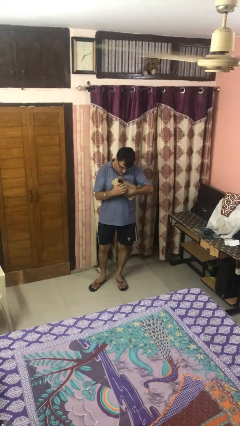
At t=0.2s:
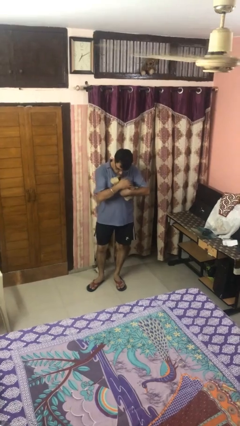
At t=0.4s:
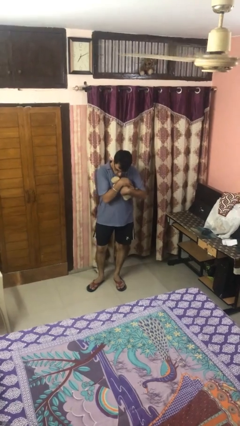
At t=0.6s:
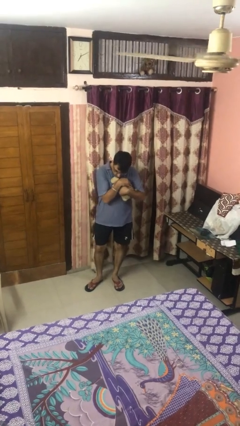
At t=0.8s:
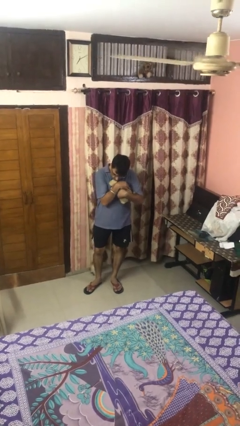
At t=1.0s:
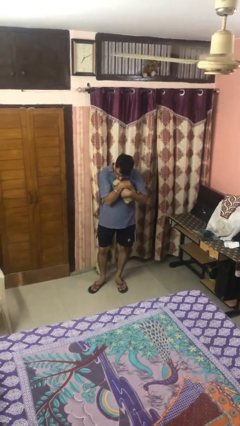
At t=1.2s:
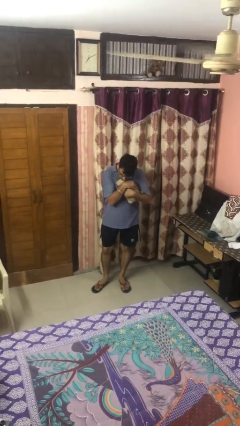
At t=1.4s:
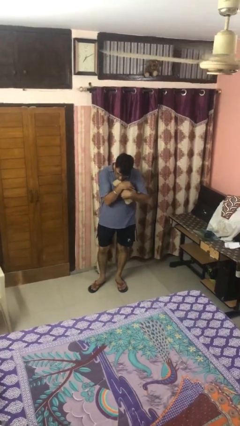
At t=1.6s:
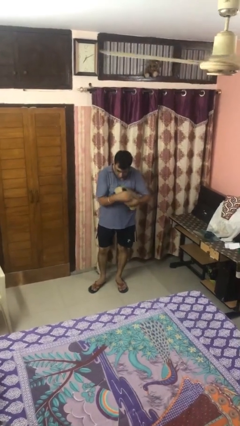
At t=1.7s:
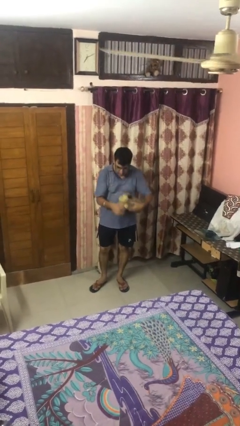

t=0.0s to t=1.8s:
person hugs stuffed animal

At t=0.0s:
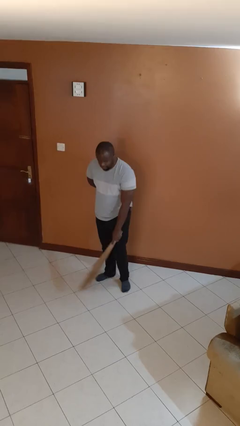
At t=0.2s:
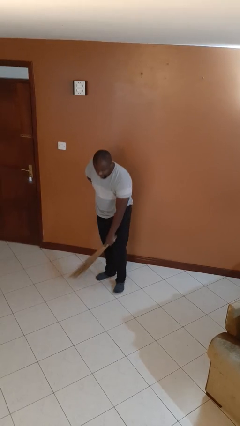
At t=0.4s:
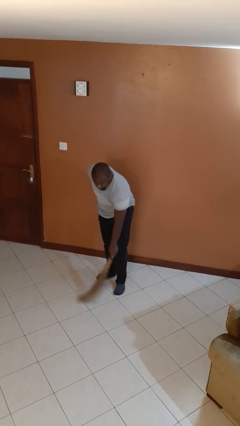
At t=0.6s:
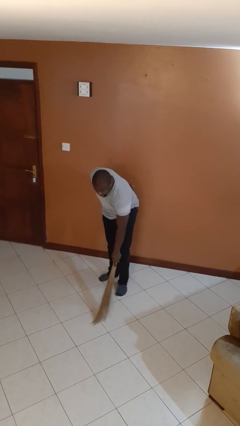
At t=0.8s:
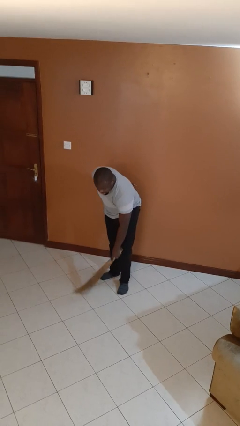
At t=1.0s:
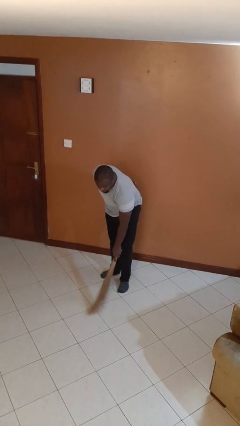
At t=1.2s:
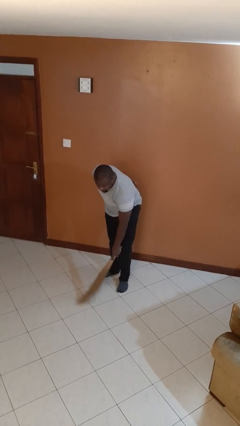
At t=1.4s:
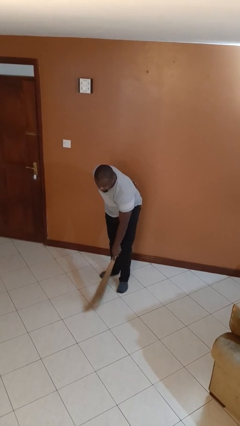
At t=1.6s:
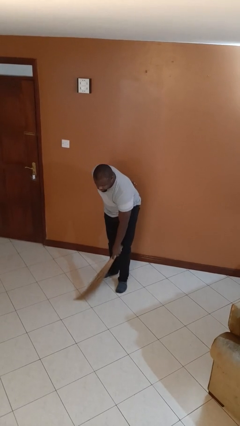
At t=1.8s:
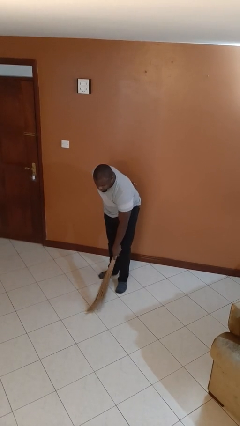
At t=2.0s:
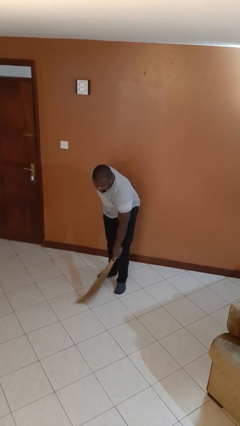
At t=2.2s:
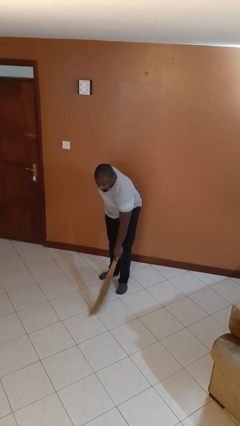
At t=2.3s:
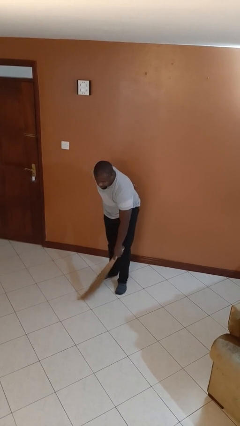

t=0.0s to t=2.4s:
person sweeps floor

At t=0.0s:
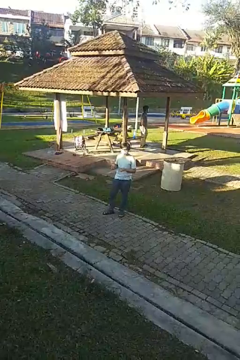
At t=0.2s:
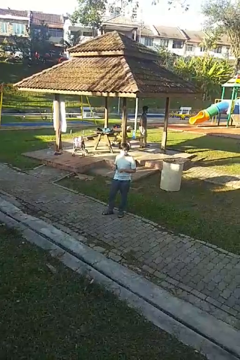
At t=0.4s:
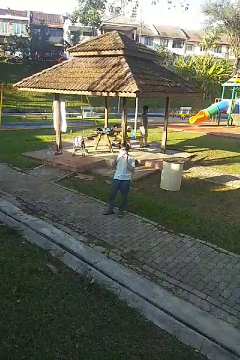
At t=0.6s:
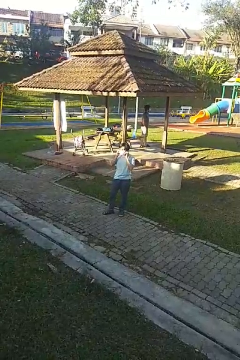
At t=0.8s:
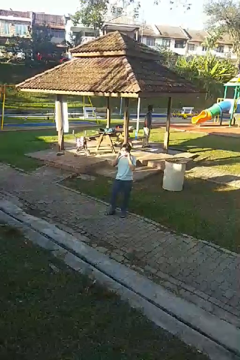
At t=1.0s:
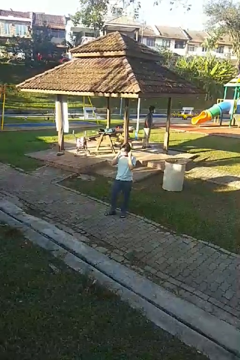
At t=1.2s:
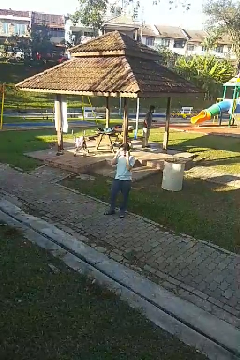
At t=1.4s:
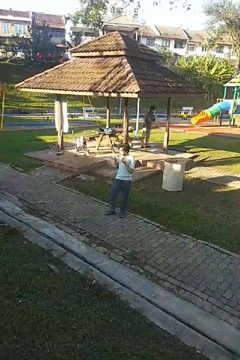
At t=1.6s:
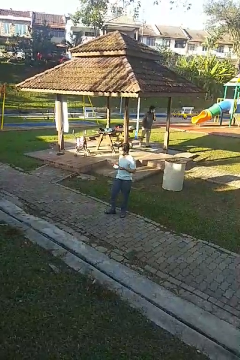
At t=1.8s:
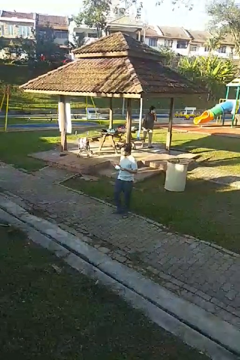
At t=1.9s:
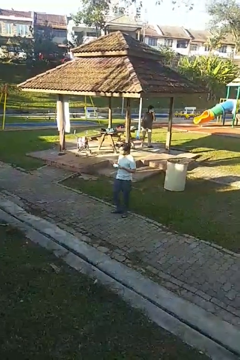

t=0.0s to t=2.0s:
person takes off facemask

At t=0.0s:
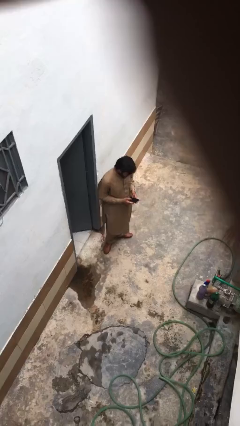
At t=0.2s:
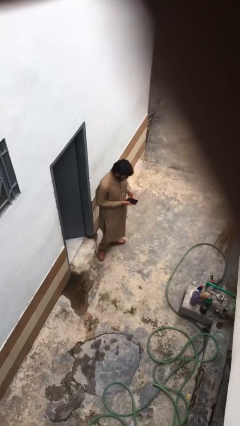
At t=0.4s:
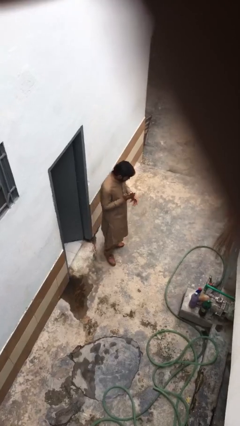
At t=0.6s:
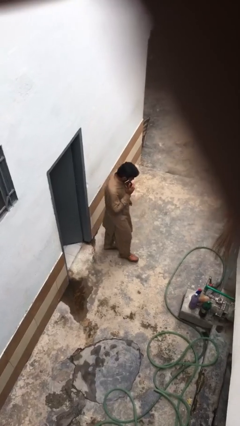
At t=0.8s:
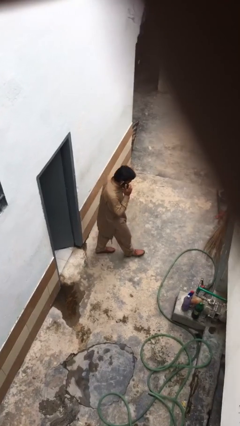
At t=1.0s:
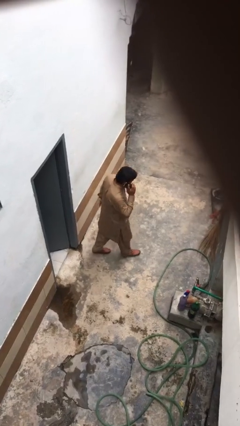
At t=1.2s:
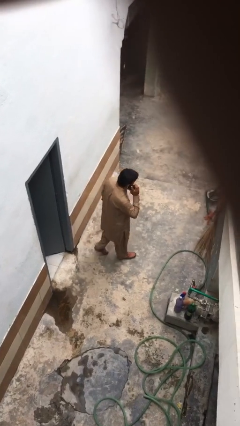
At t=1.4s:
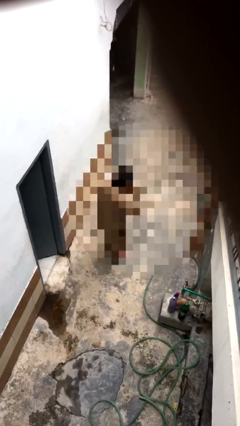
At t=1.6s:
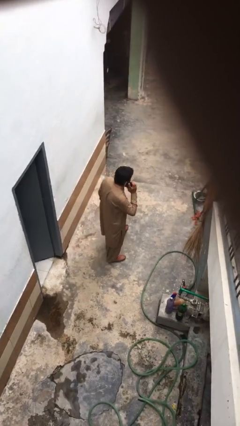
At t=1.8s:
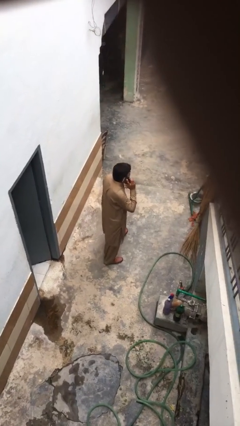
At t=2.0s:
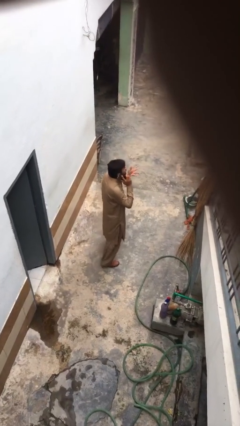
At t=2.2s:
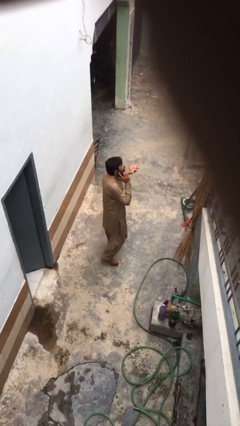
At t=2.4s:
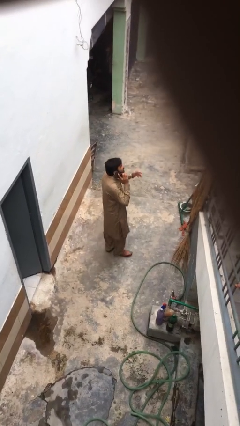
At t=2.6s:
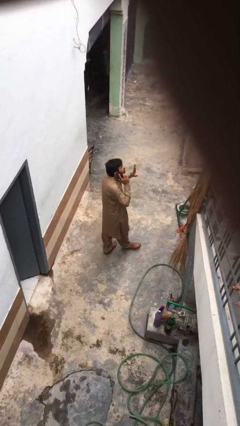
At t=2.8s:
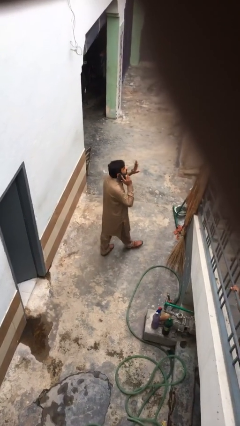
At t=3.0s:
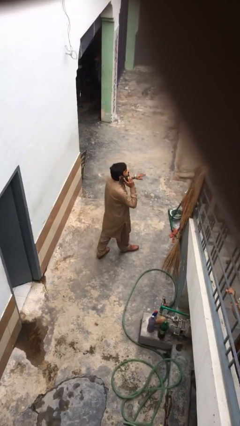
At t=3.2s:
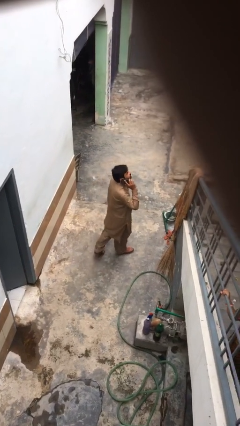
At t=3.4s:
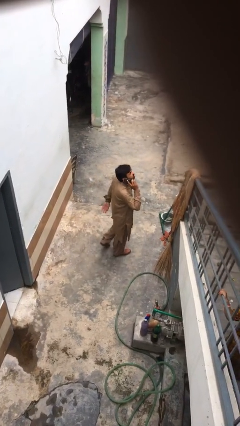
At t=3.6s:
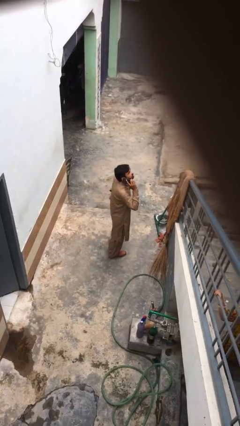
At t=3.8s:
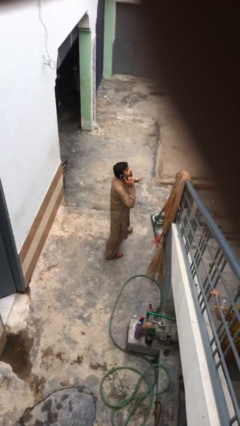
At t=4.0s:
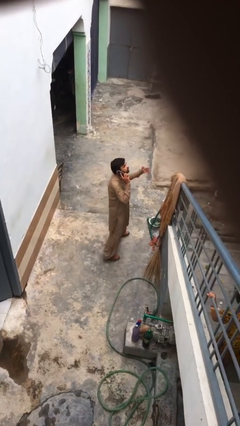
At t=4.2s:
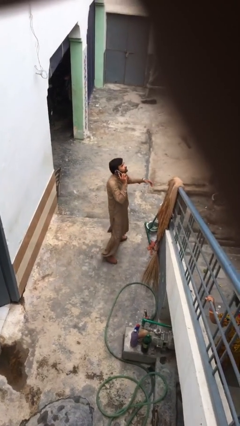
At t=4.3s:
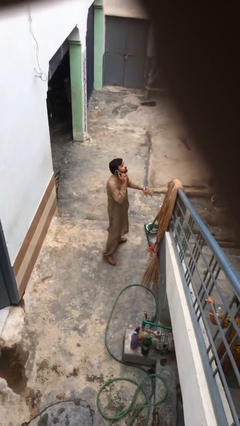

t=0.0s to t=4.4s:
person talks on phone

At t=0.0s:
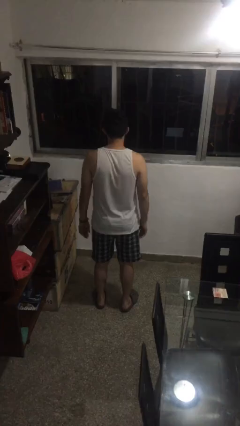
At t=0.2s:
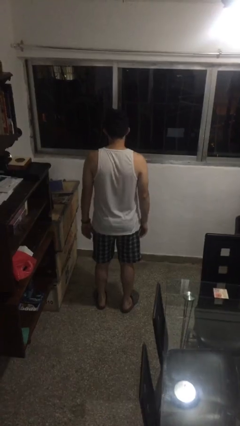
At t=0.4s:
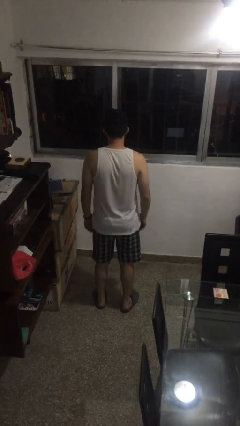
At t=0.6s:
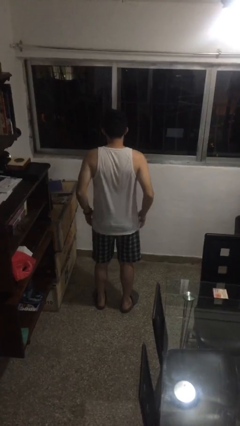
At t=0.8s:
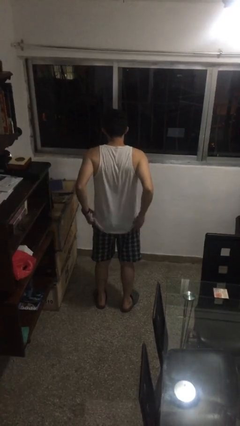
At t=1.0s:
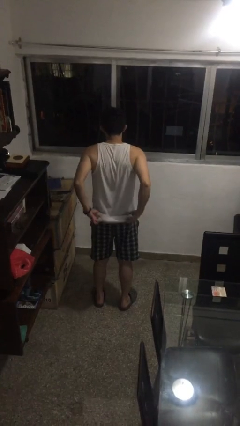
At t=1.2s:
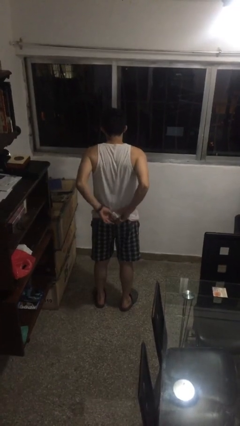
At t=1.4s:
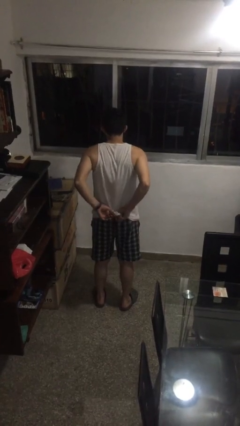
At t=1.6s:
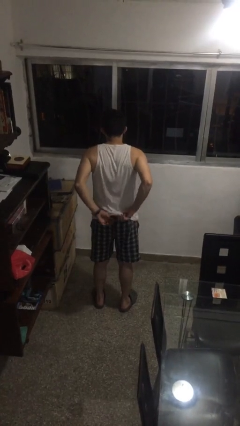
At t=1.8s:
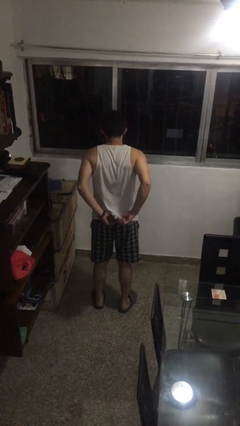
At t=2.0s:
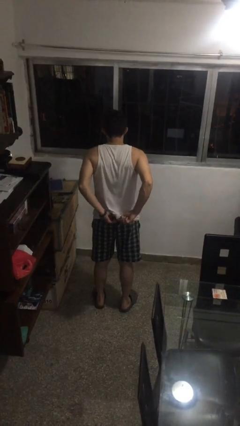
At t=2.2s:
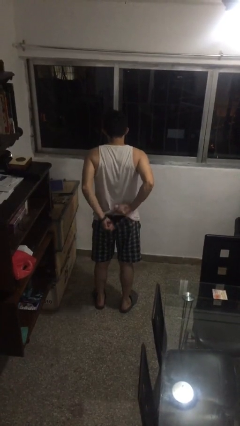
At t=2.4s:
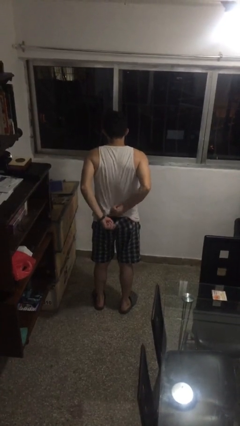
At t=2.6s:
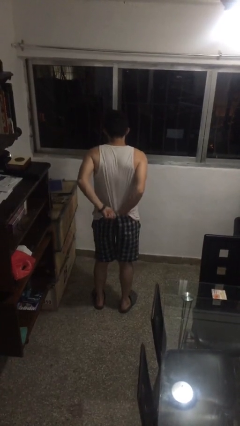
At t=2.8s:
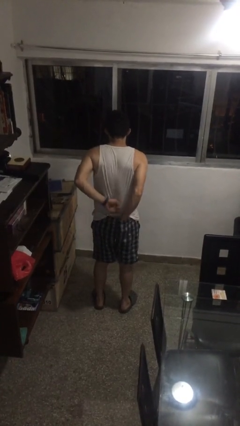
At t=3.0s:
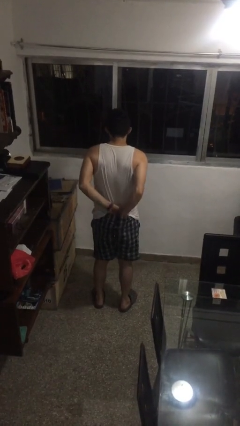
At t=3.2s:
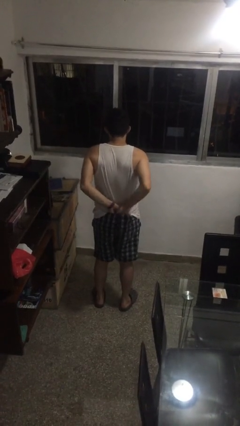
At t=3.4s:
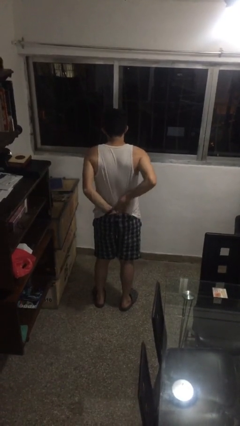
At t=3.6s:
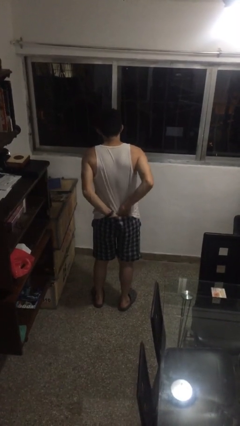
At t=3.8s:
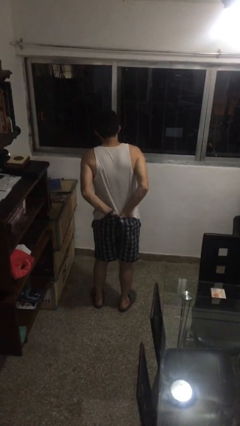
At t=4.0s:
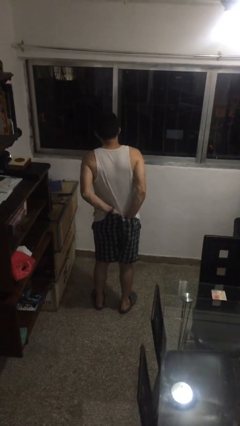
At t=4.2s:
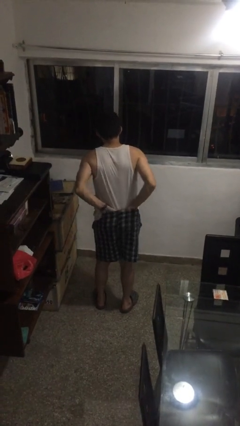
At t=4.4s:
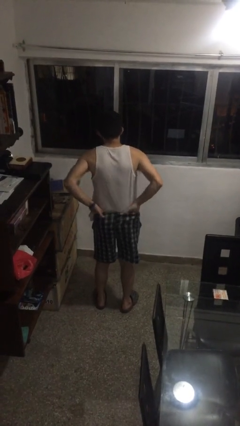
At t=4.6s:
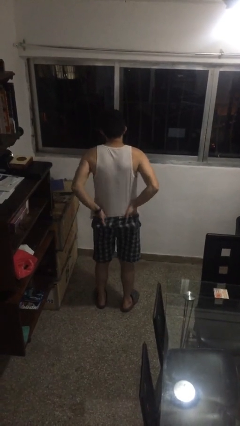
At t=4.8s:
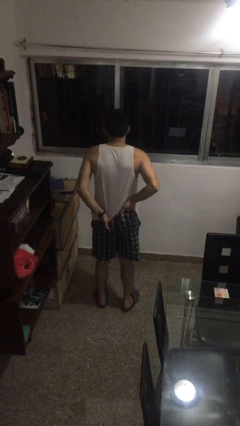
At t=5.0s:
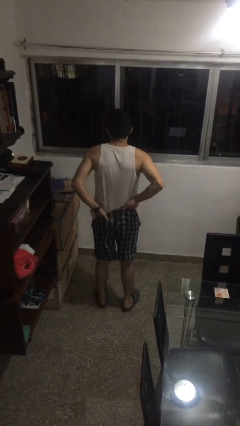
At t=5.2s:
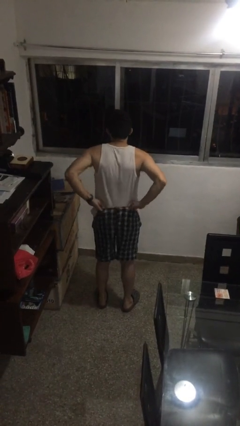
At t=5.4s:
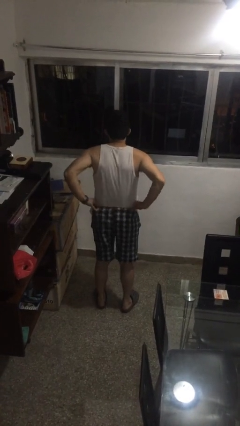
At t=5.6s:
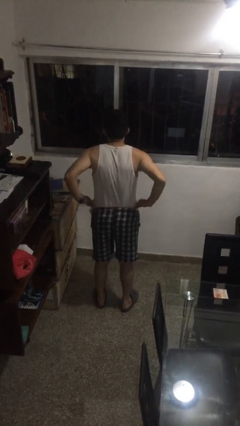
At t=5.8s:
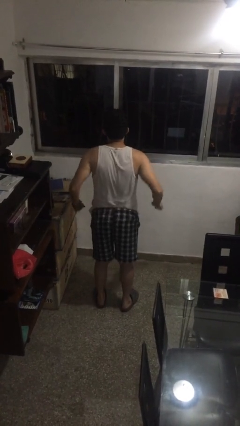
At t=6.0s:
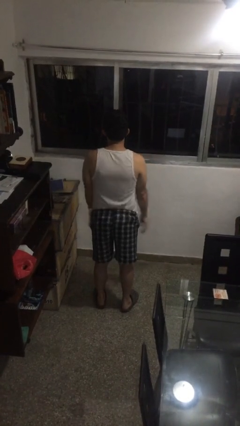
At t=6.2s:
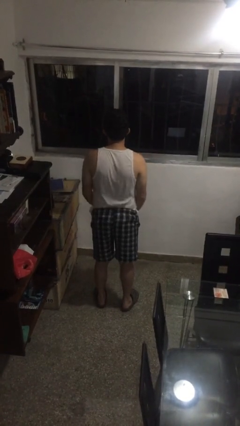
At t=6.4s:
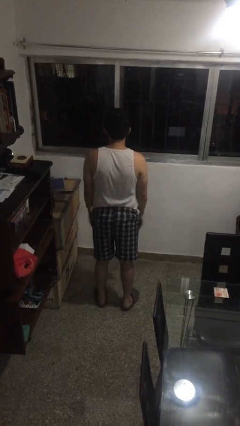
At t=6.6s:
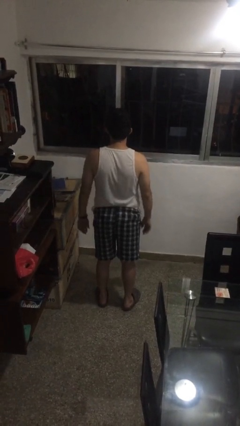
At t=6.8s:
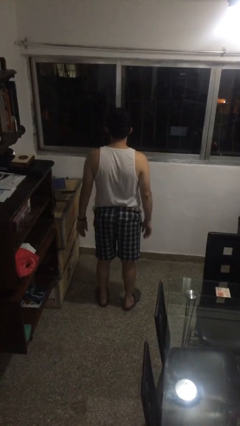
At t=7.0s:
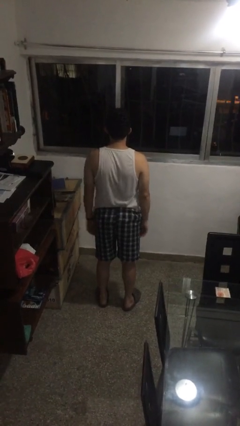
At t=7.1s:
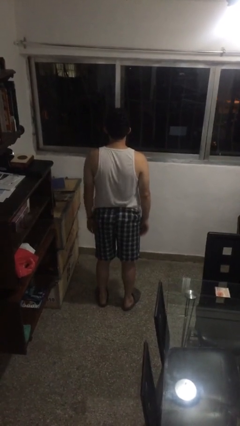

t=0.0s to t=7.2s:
person tucks in shirt
